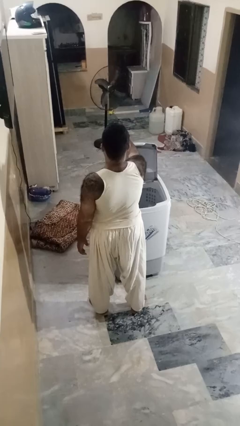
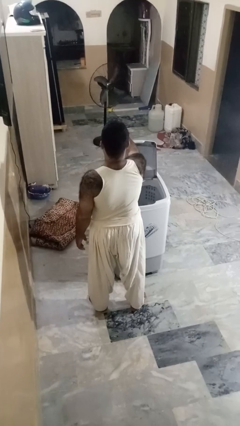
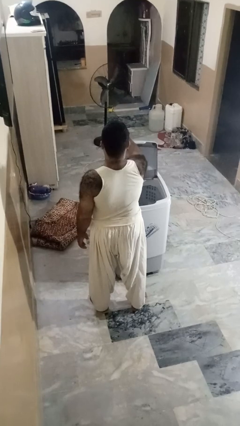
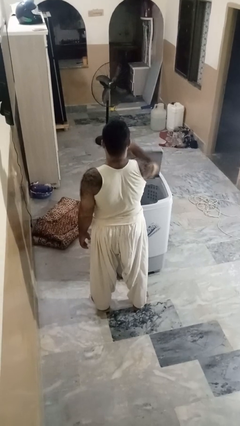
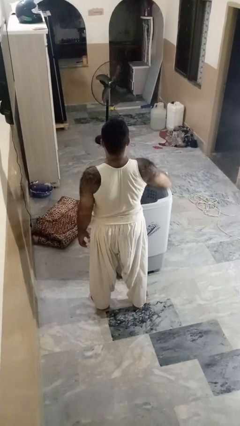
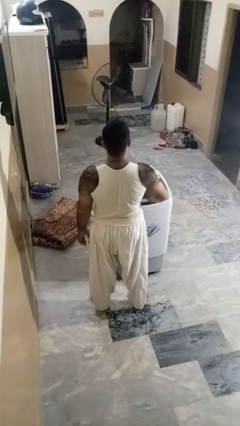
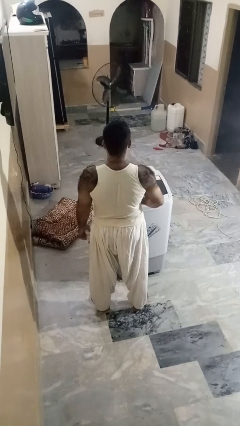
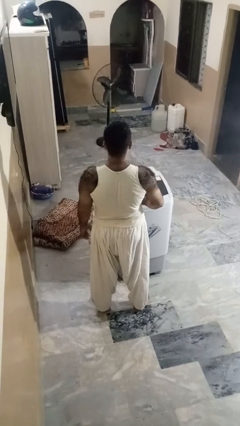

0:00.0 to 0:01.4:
person closes clothes washer

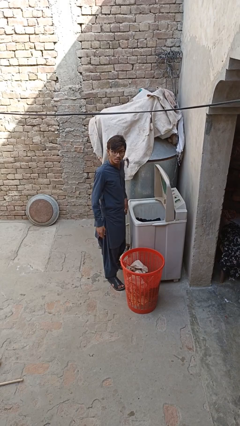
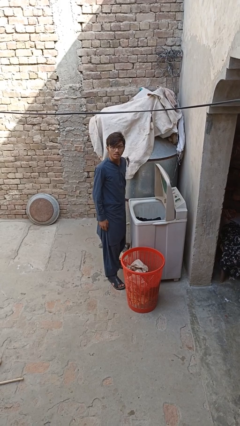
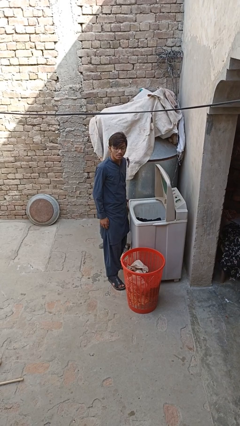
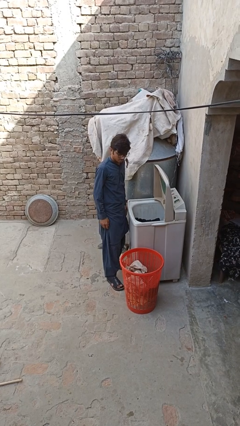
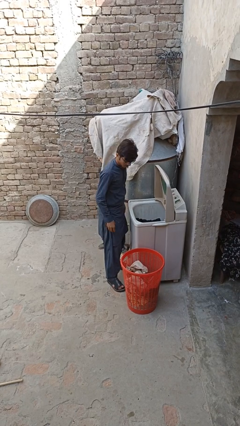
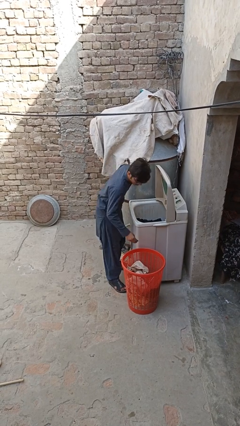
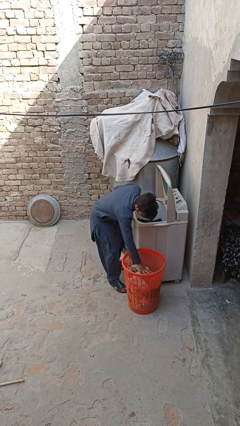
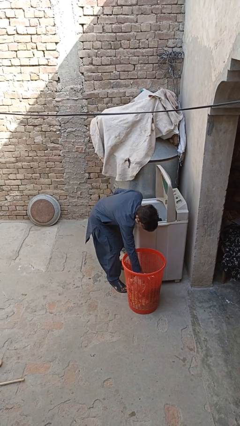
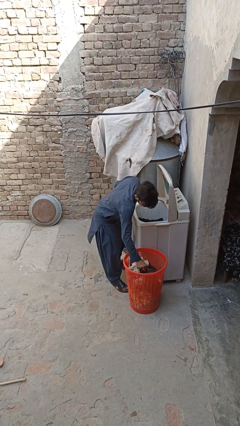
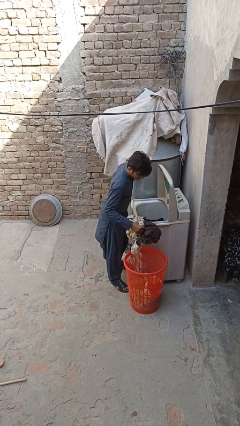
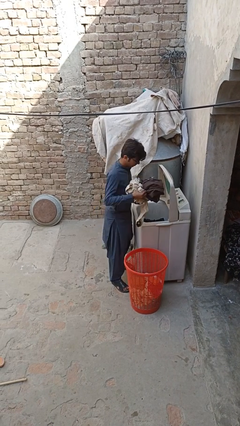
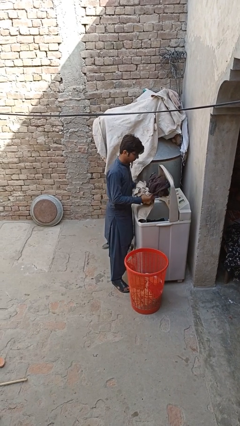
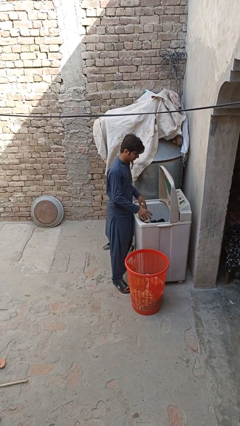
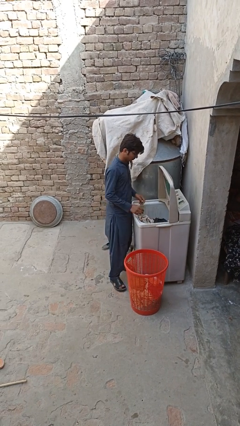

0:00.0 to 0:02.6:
person loads clotheswasher

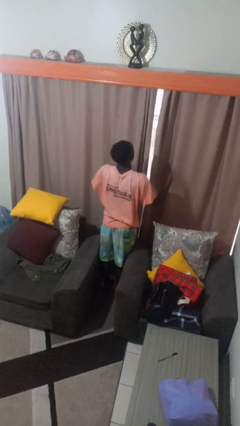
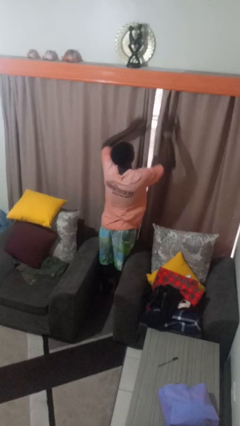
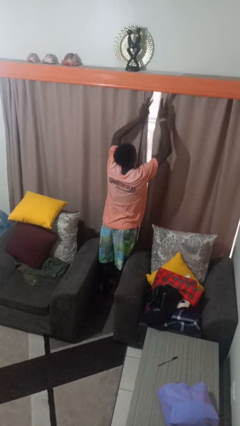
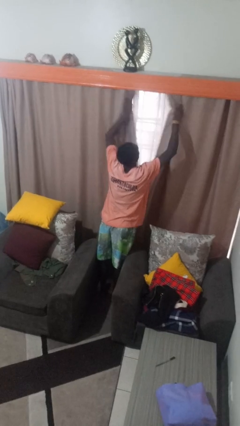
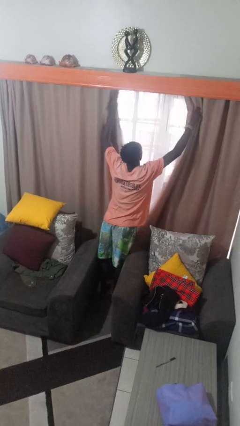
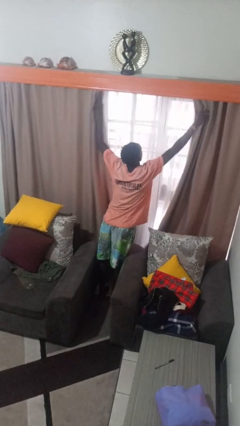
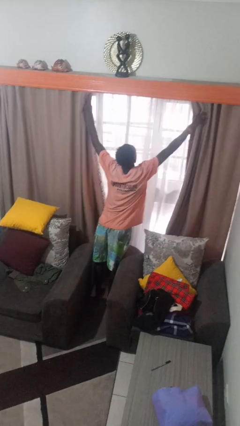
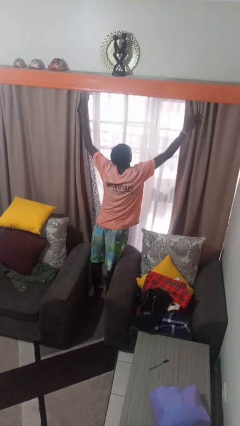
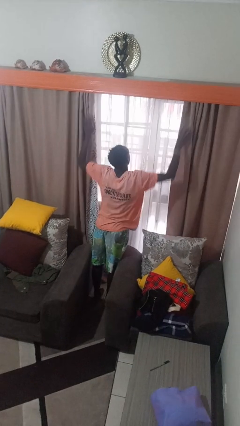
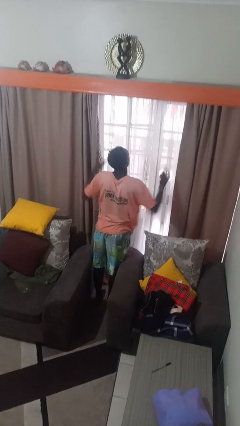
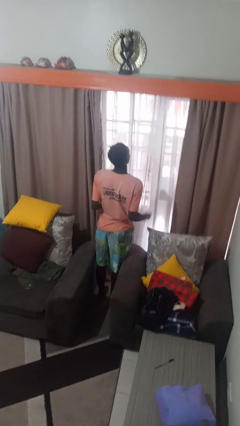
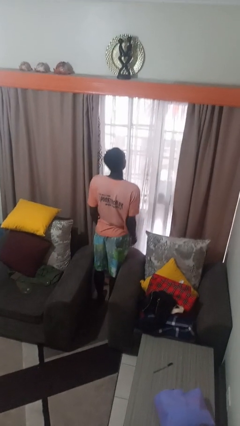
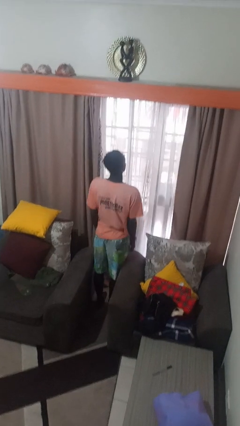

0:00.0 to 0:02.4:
person opens curtains

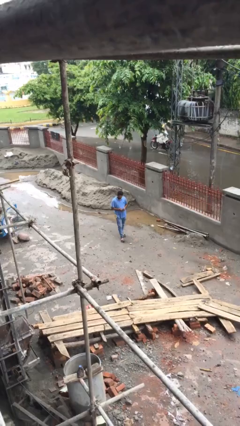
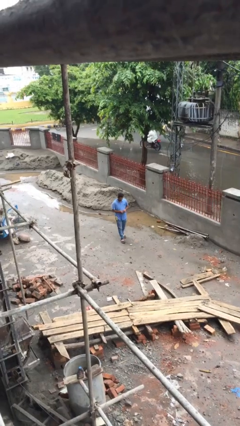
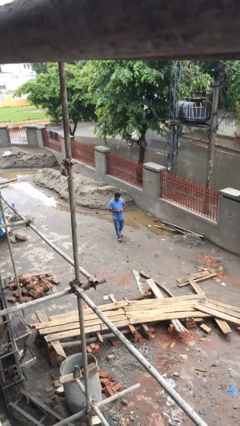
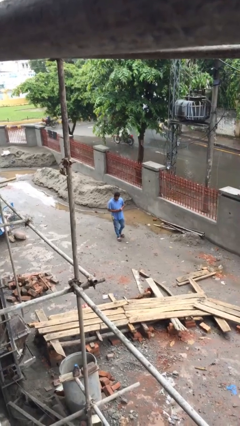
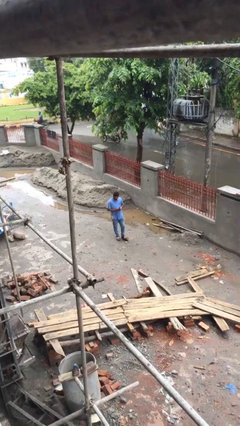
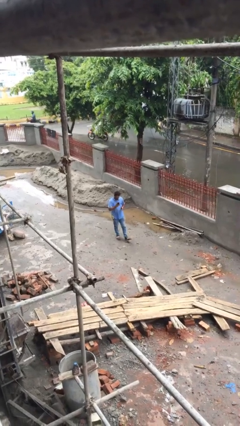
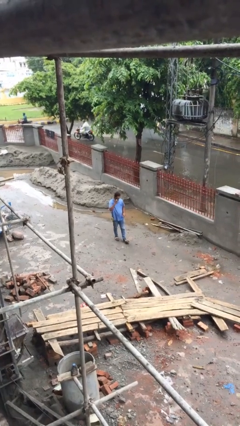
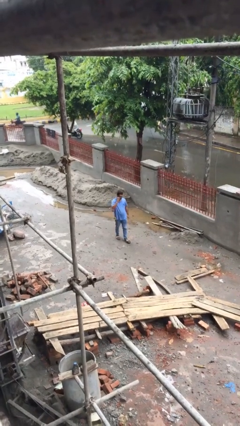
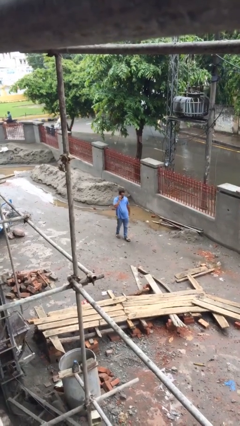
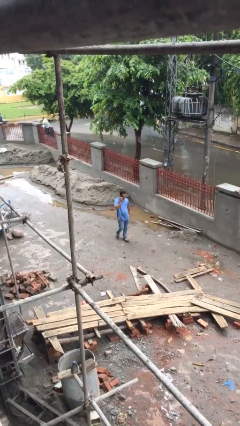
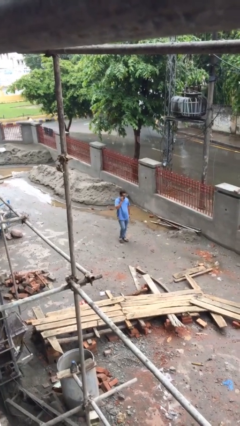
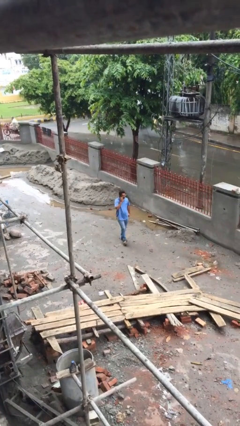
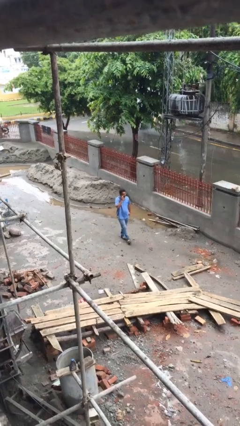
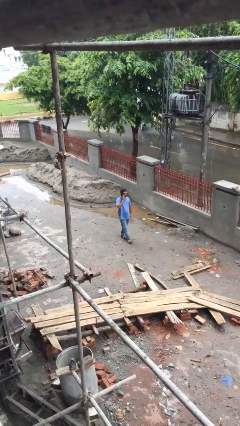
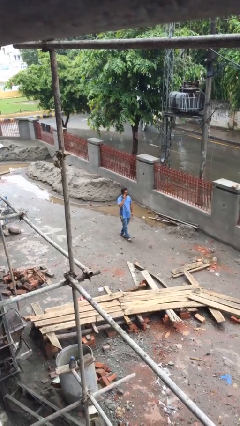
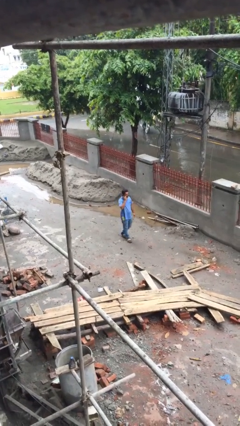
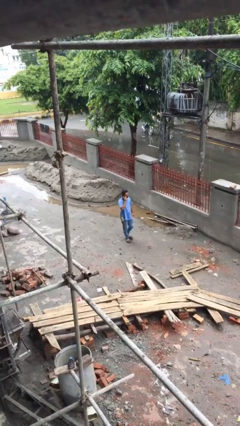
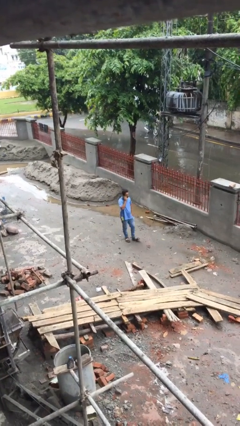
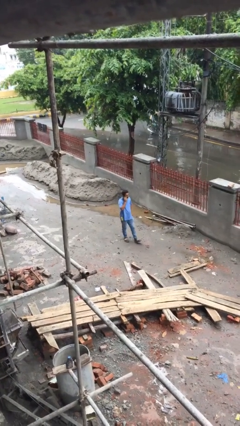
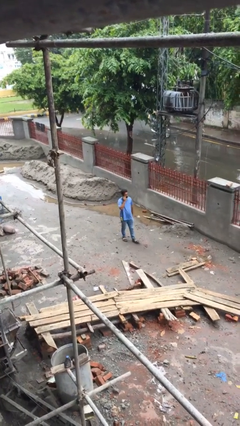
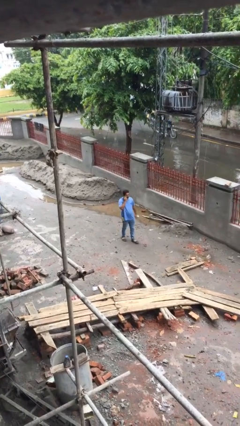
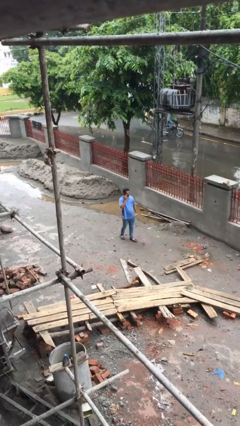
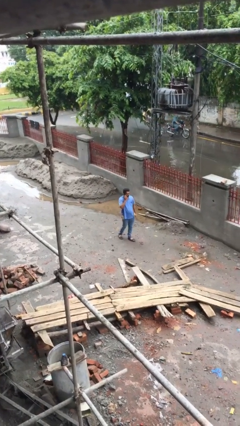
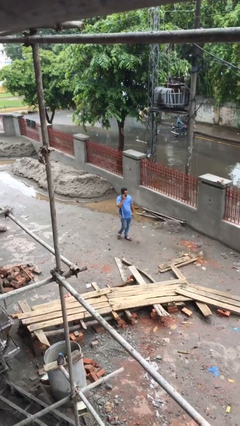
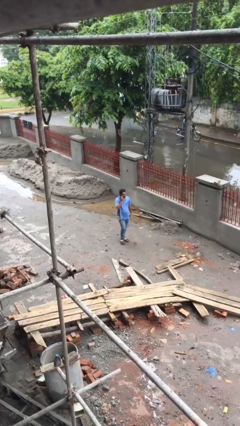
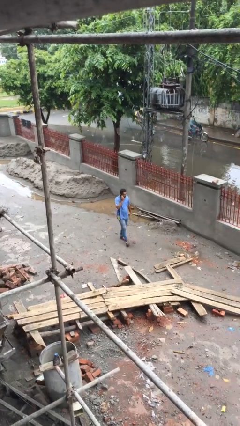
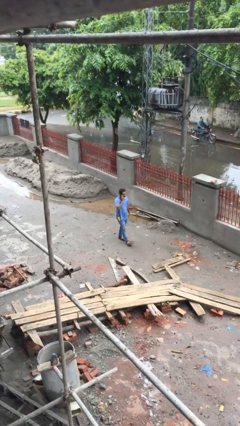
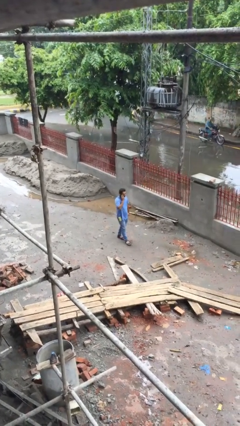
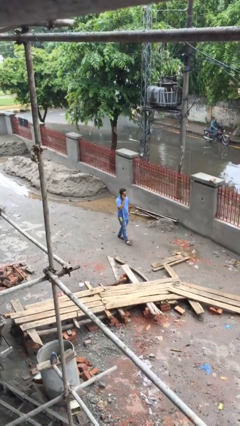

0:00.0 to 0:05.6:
person talks on phone

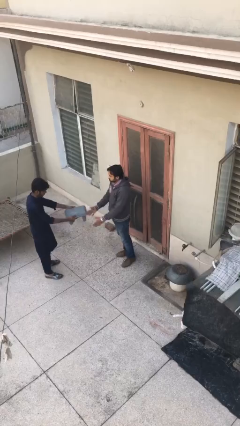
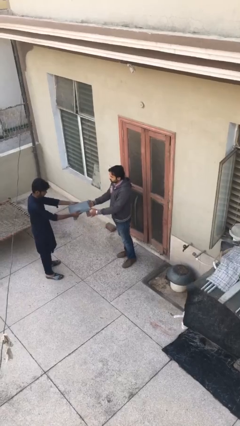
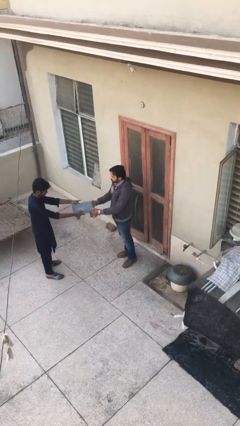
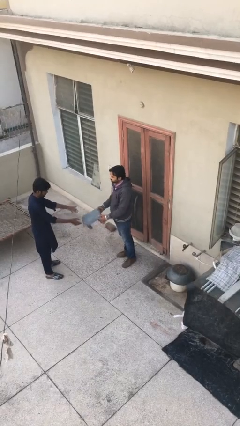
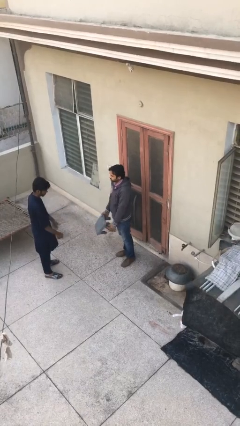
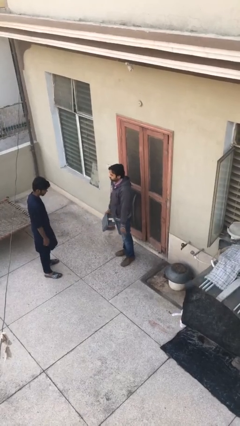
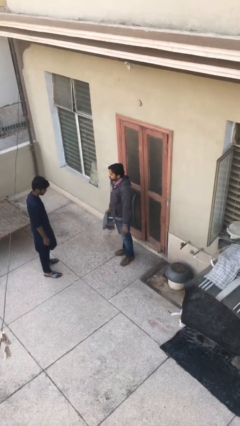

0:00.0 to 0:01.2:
person transfers object to person

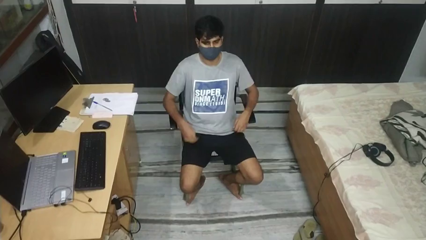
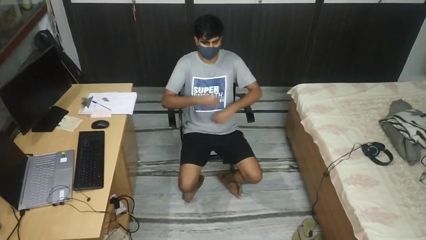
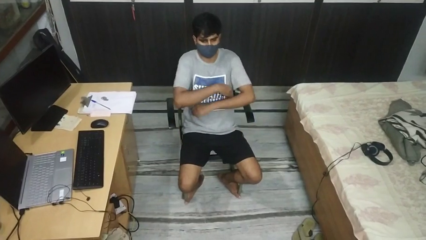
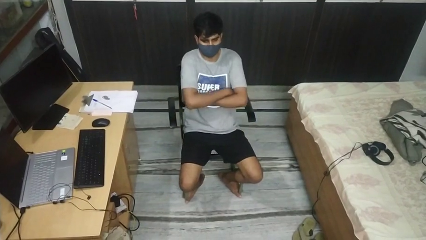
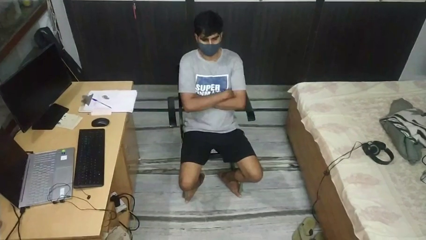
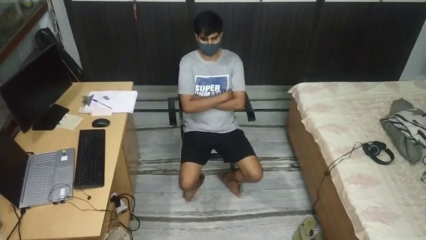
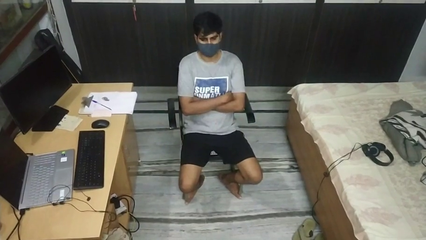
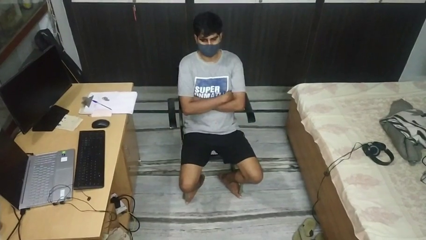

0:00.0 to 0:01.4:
person crosses arms

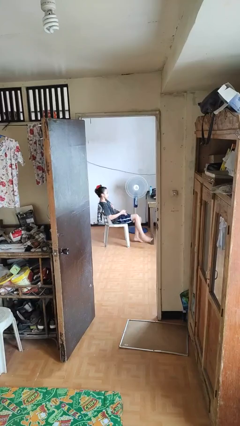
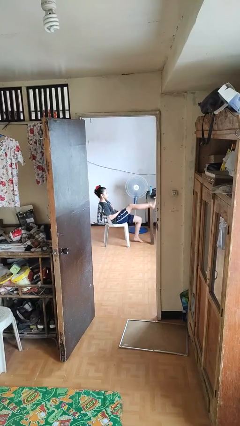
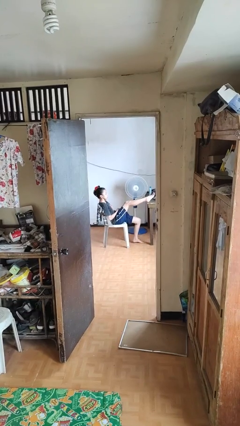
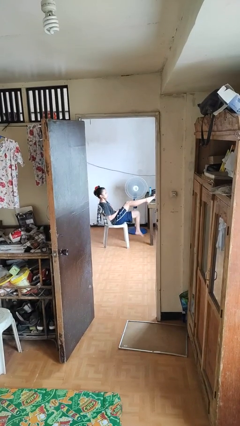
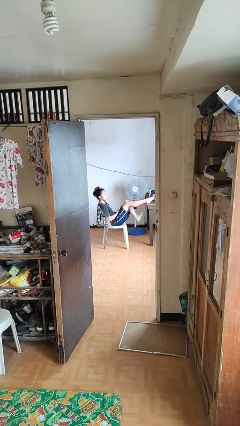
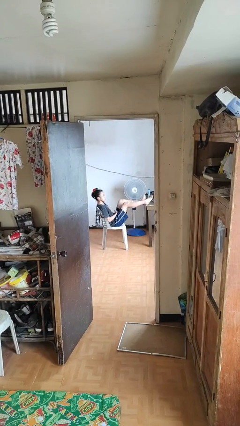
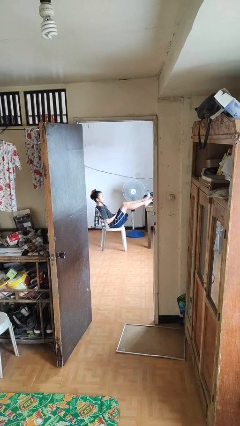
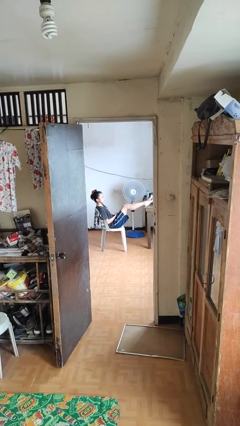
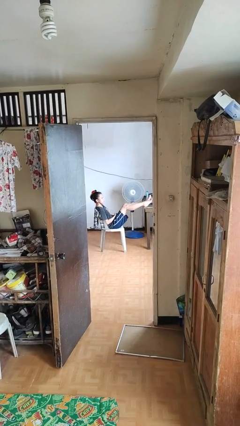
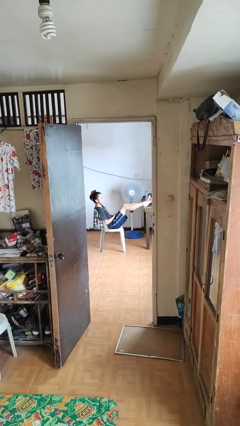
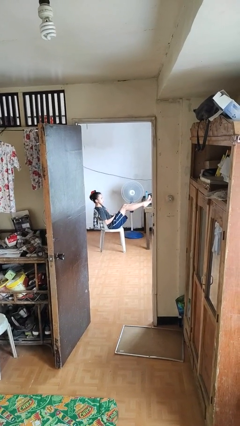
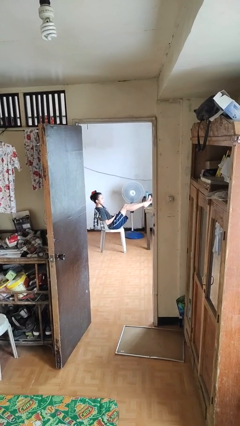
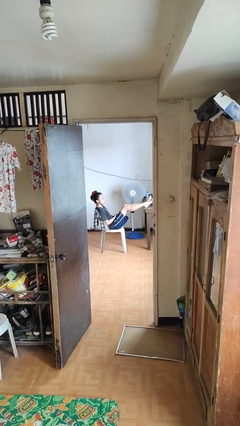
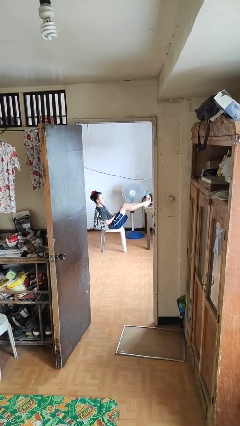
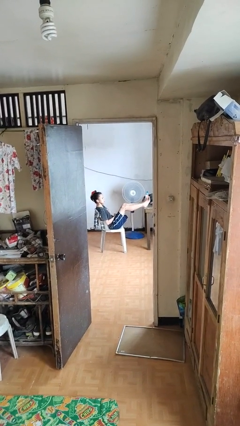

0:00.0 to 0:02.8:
person puts feet up
